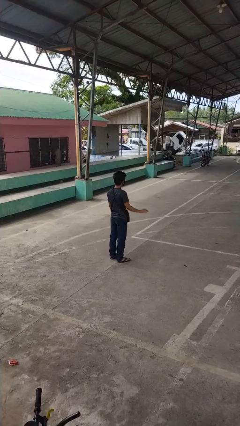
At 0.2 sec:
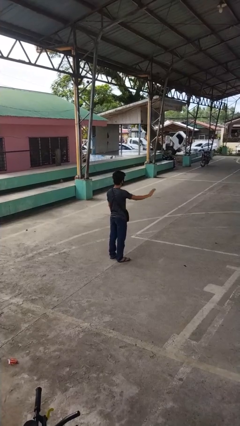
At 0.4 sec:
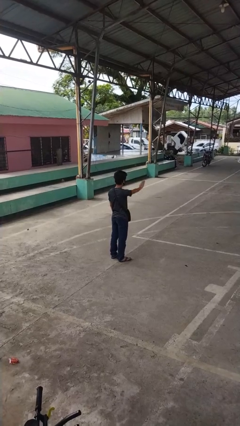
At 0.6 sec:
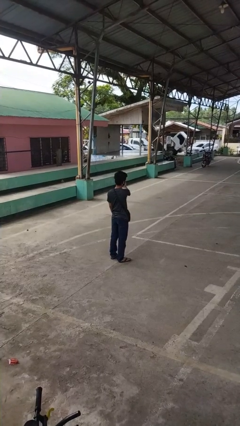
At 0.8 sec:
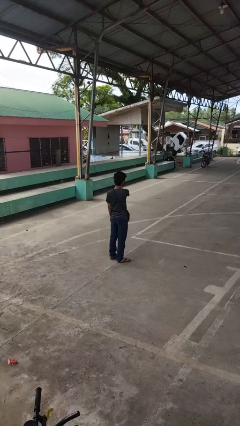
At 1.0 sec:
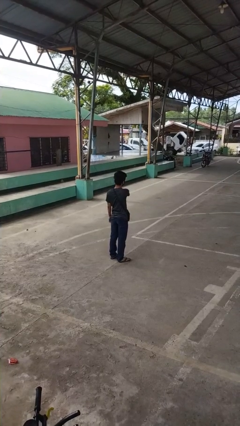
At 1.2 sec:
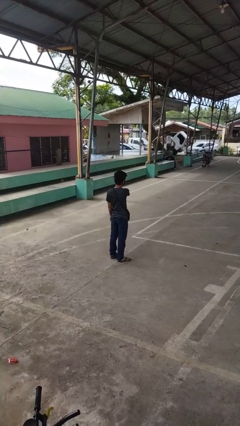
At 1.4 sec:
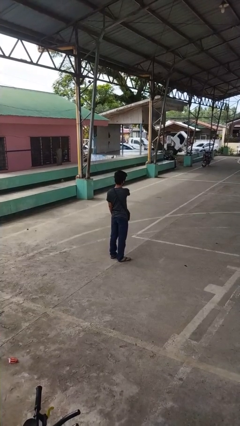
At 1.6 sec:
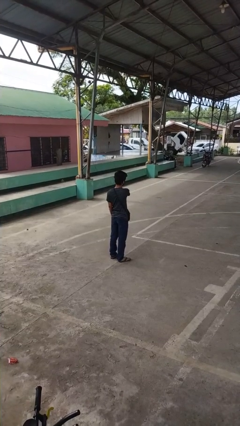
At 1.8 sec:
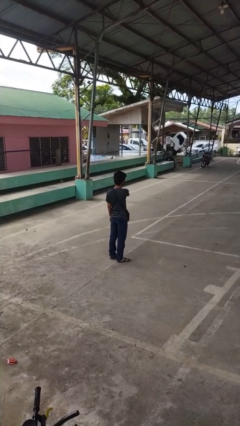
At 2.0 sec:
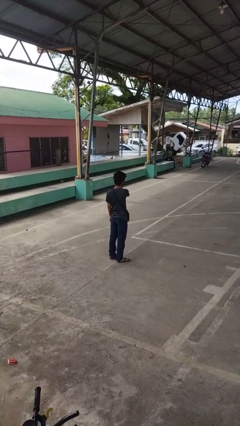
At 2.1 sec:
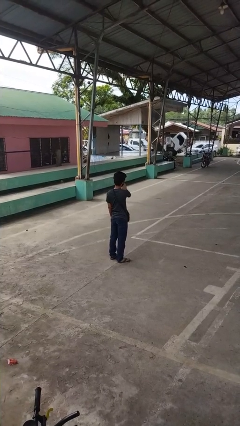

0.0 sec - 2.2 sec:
person gestures swipe left

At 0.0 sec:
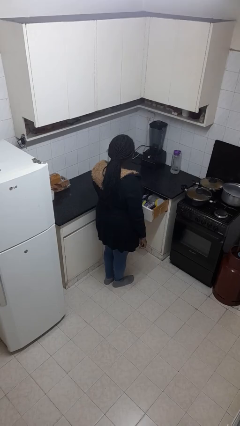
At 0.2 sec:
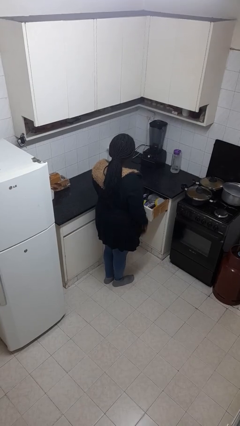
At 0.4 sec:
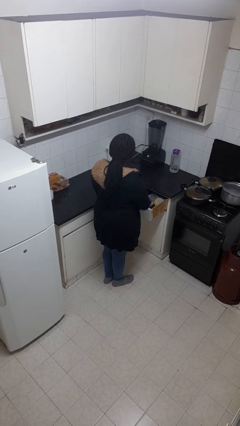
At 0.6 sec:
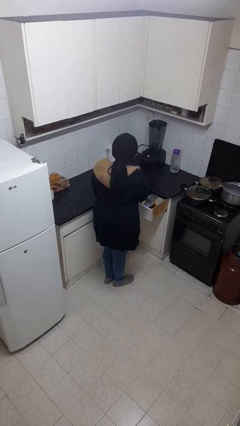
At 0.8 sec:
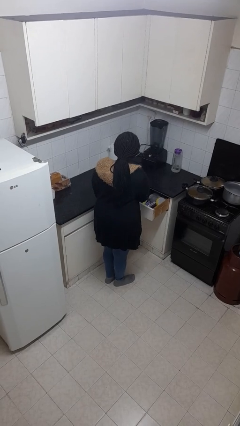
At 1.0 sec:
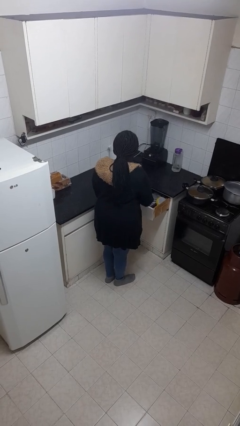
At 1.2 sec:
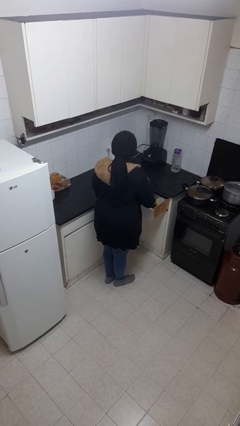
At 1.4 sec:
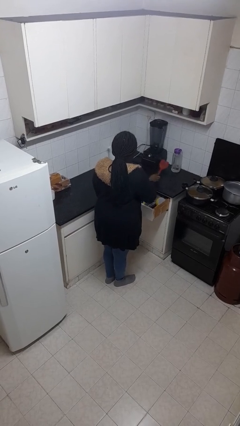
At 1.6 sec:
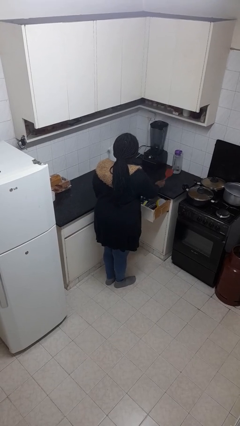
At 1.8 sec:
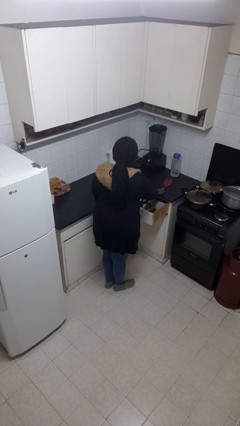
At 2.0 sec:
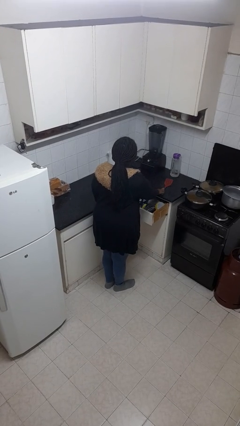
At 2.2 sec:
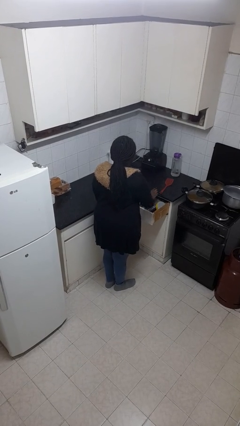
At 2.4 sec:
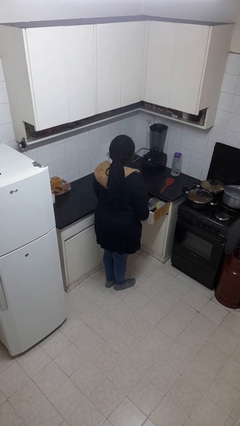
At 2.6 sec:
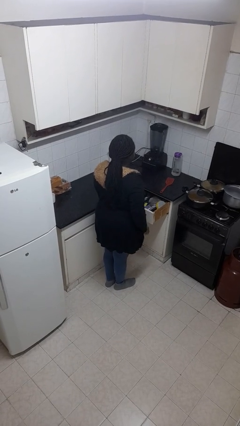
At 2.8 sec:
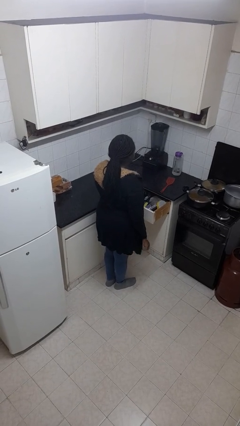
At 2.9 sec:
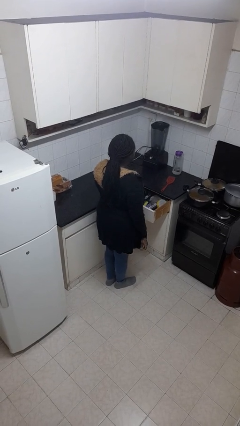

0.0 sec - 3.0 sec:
person takes object from kitchen drawer

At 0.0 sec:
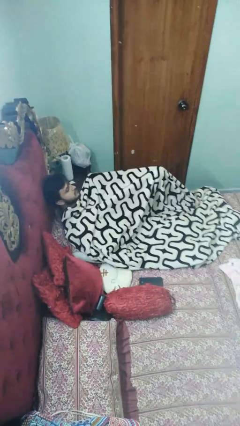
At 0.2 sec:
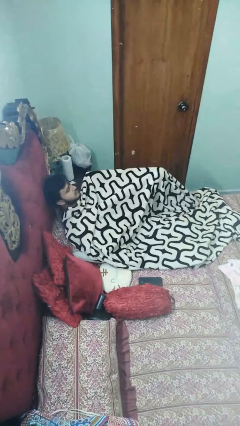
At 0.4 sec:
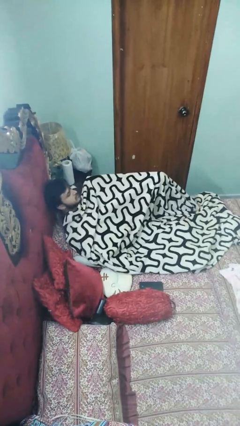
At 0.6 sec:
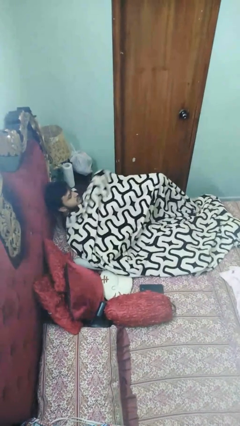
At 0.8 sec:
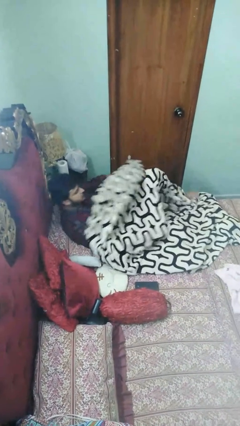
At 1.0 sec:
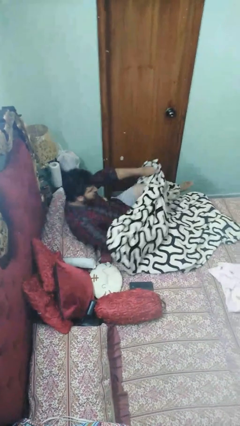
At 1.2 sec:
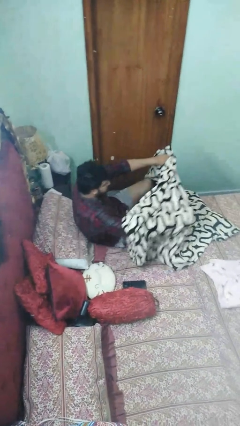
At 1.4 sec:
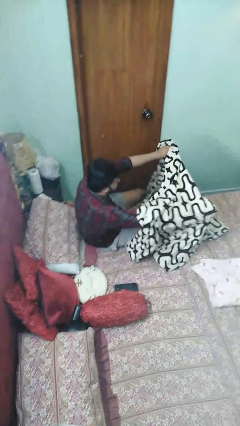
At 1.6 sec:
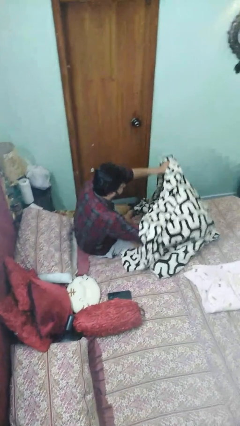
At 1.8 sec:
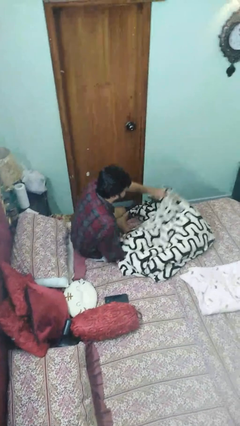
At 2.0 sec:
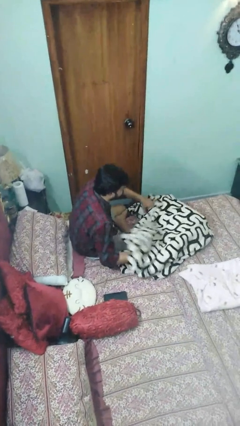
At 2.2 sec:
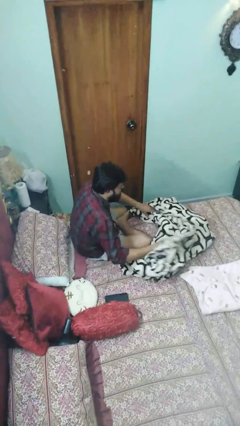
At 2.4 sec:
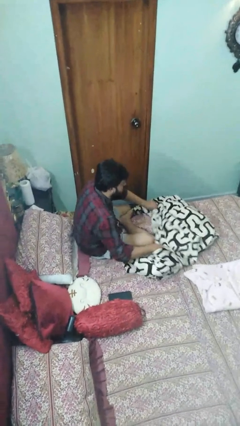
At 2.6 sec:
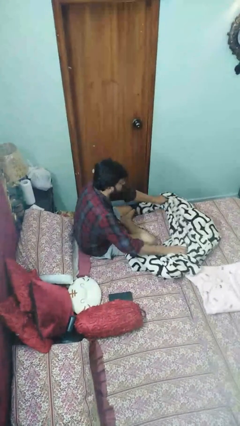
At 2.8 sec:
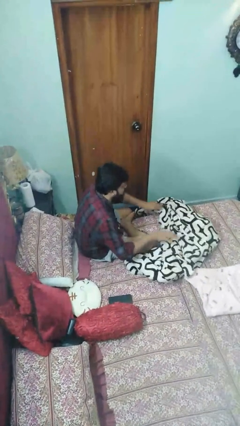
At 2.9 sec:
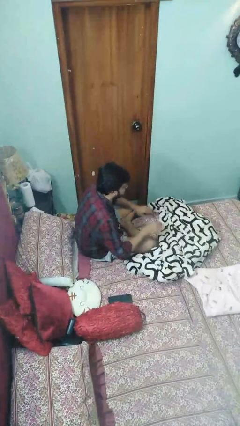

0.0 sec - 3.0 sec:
person uncovers with blanket

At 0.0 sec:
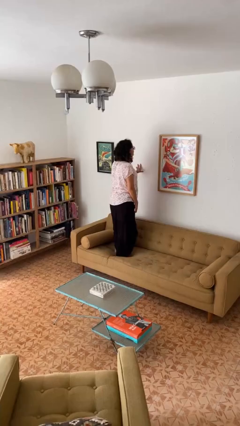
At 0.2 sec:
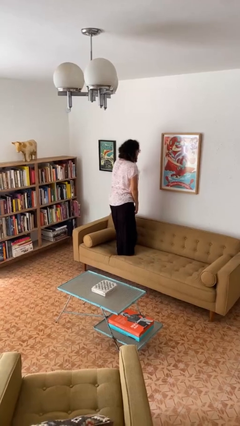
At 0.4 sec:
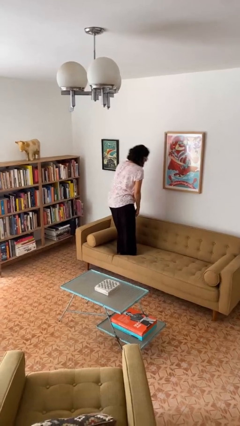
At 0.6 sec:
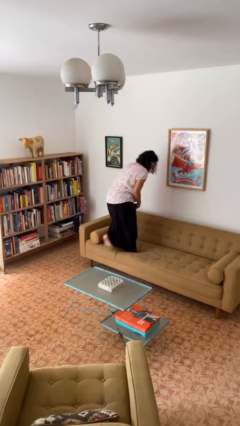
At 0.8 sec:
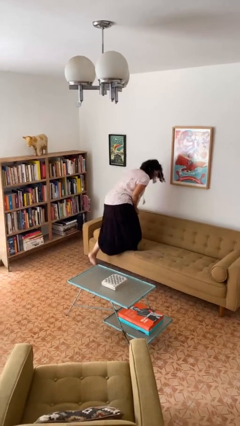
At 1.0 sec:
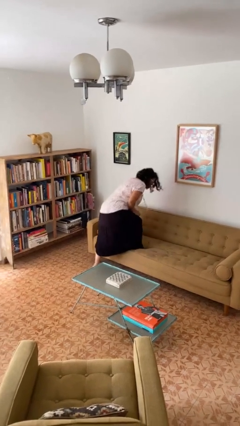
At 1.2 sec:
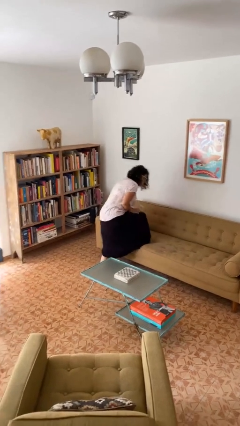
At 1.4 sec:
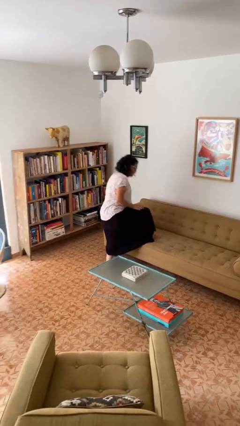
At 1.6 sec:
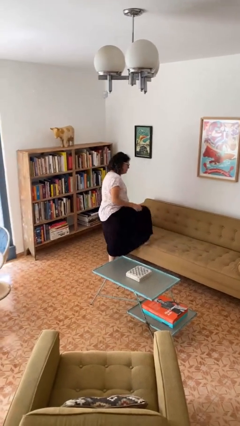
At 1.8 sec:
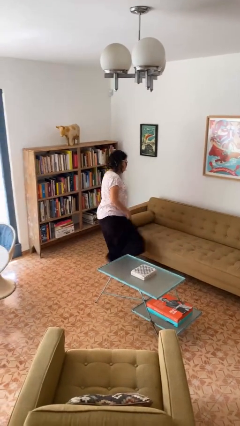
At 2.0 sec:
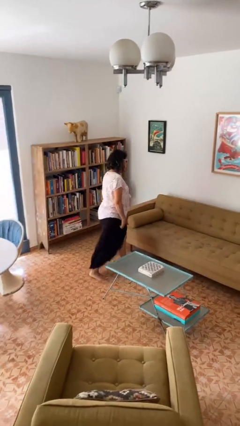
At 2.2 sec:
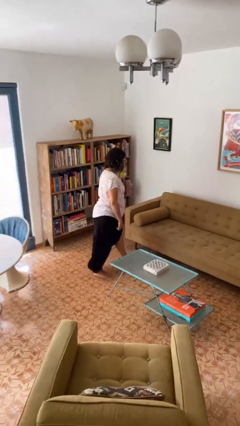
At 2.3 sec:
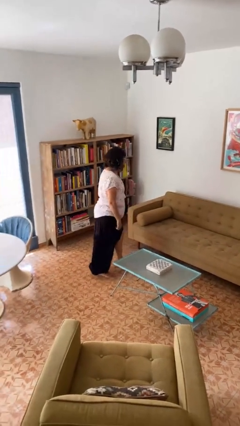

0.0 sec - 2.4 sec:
person climbs off couch

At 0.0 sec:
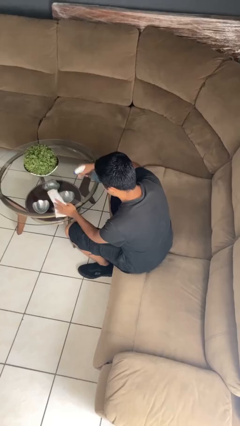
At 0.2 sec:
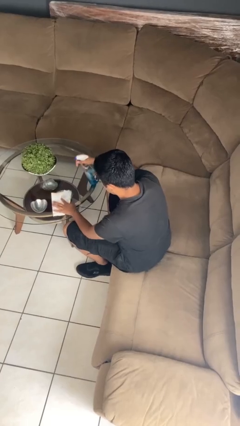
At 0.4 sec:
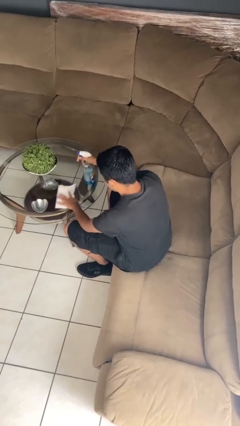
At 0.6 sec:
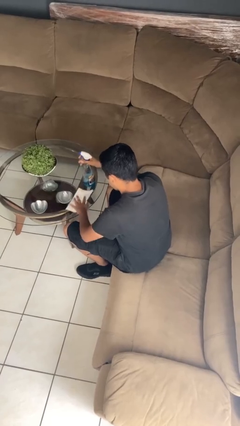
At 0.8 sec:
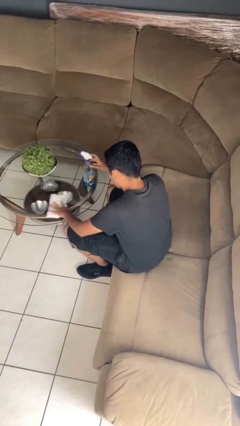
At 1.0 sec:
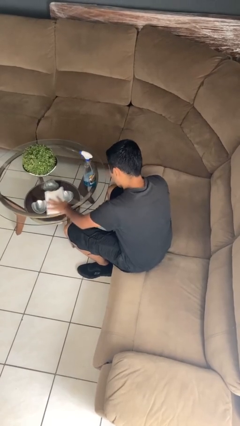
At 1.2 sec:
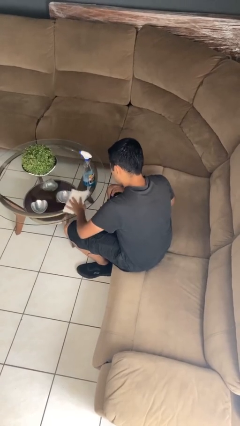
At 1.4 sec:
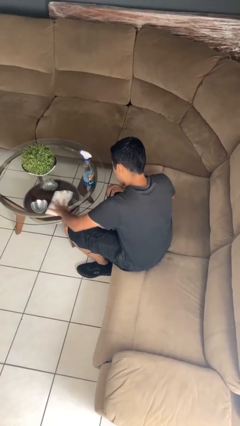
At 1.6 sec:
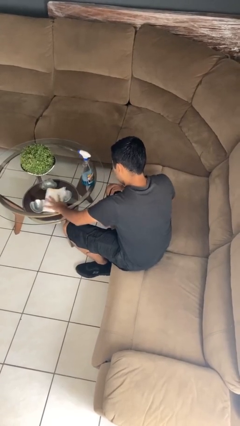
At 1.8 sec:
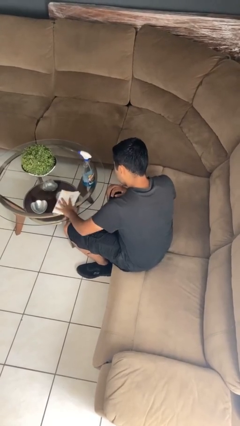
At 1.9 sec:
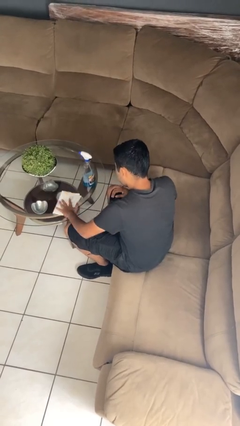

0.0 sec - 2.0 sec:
person cleans table with rag

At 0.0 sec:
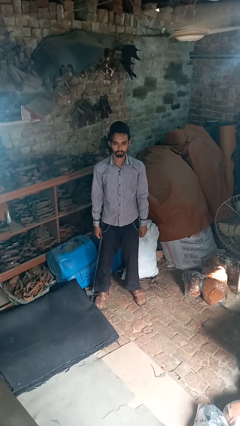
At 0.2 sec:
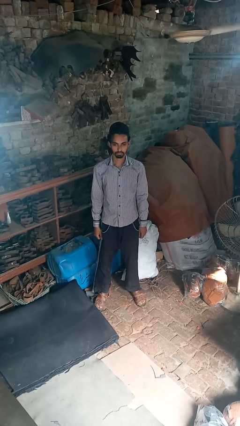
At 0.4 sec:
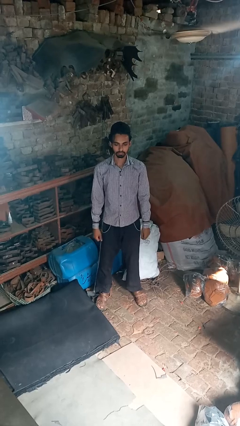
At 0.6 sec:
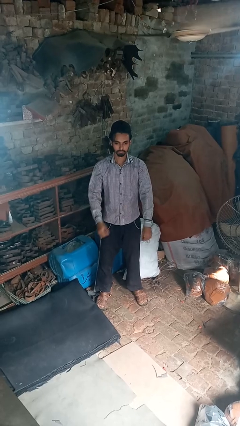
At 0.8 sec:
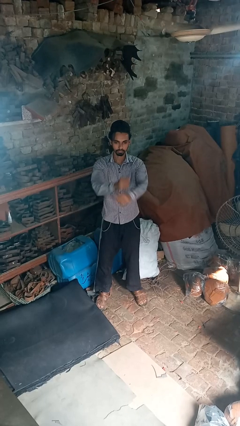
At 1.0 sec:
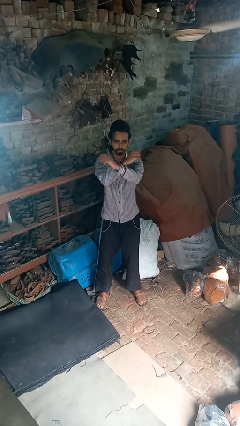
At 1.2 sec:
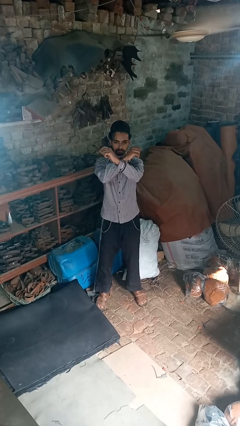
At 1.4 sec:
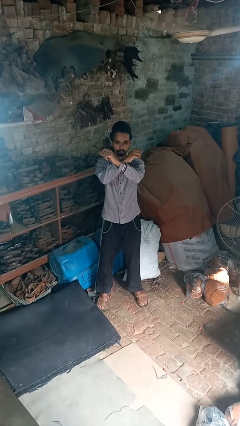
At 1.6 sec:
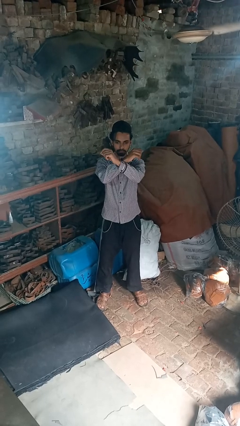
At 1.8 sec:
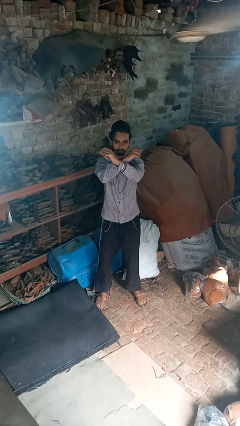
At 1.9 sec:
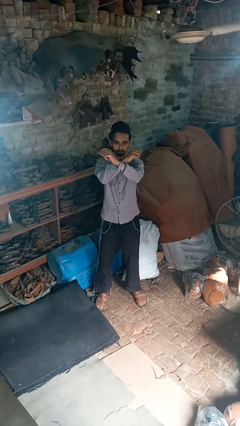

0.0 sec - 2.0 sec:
person crosses arms

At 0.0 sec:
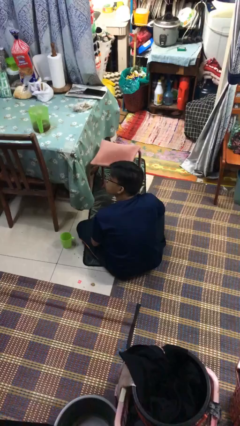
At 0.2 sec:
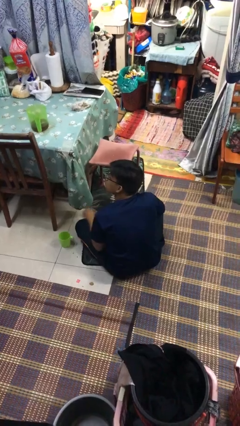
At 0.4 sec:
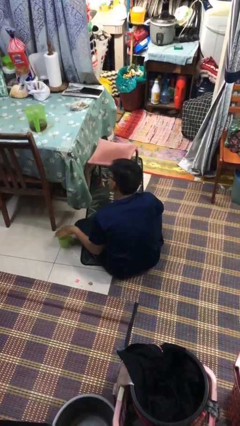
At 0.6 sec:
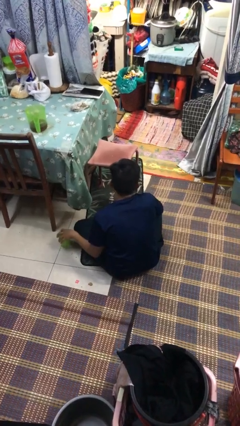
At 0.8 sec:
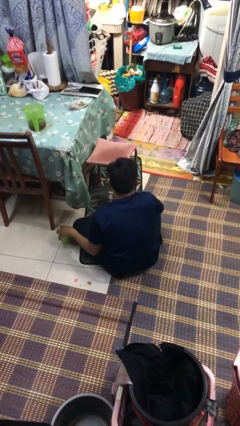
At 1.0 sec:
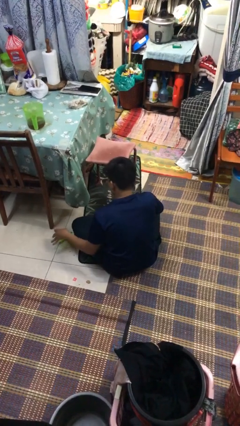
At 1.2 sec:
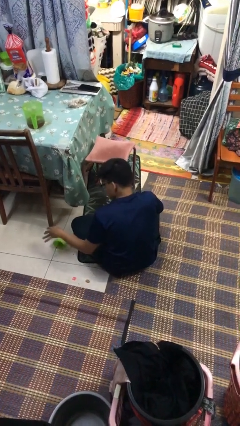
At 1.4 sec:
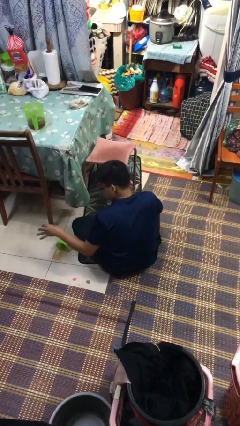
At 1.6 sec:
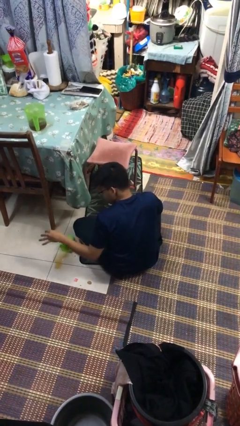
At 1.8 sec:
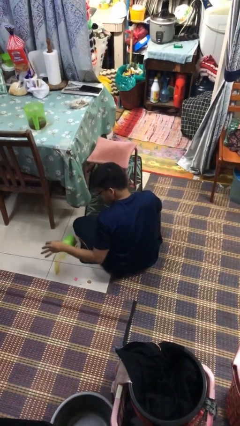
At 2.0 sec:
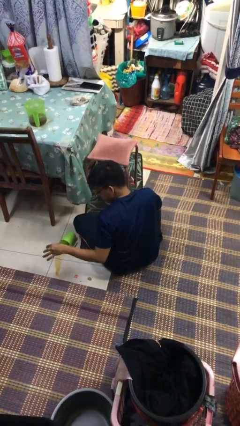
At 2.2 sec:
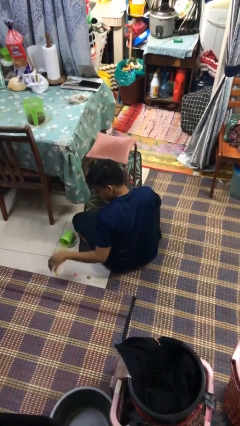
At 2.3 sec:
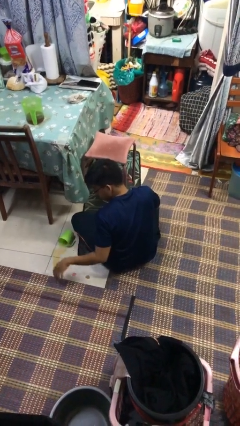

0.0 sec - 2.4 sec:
person spills on floor
